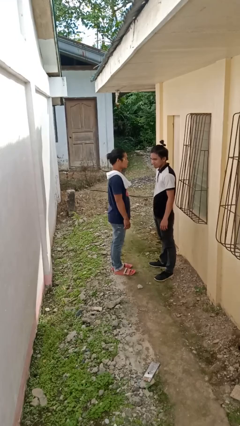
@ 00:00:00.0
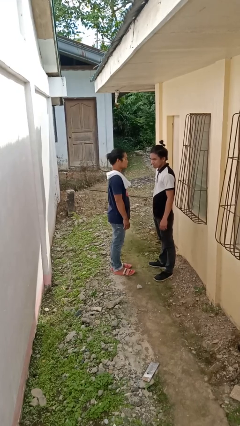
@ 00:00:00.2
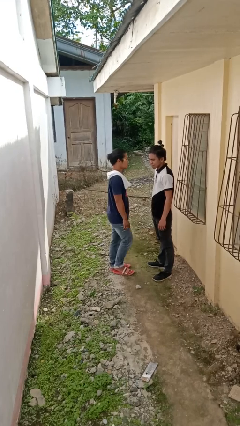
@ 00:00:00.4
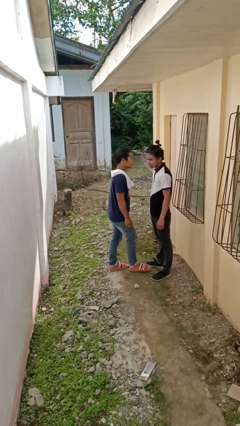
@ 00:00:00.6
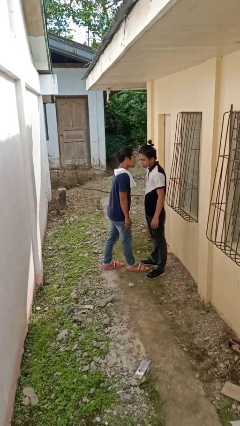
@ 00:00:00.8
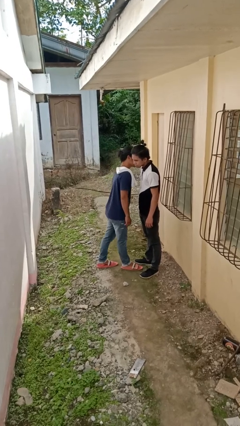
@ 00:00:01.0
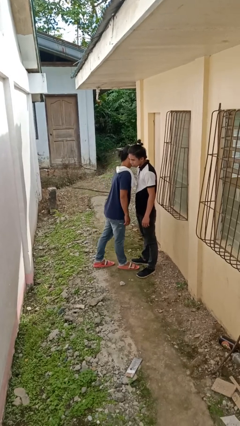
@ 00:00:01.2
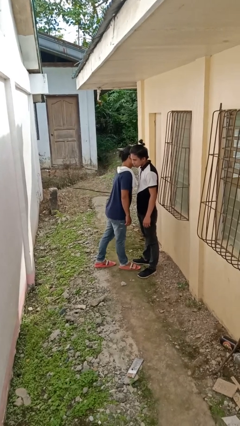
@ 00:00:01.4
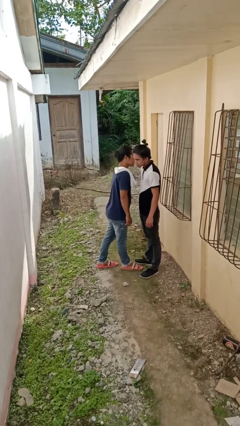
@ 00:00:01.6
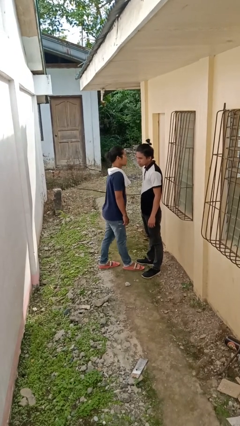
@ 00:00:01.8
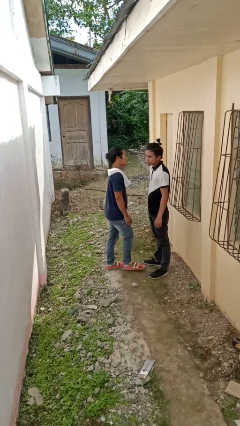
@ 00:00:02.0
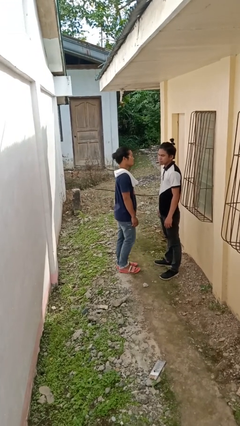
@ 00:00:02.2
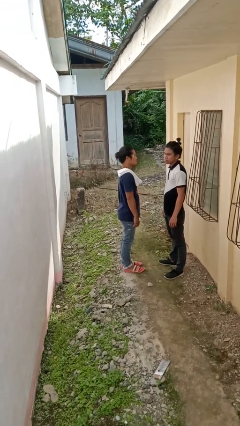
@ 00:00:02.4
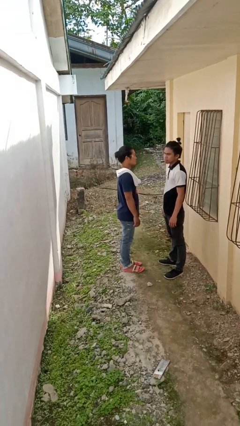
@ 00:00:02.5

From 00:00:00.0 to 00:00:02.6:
person kisses cheek of person

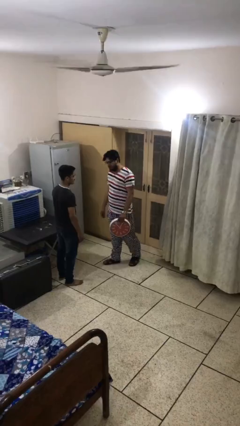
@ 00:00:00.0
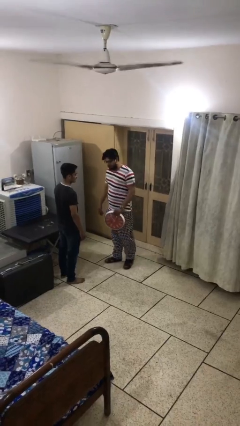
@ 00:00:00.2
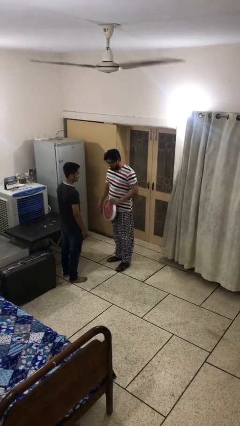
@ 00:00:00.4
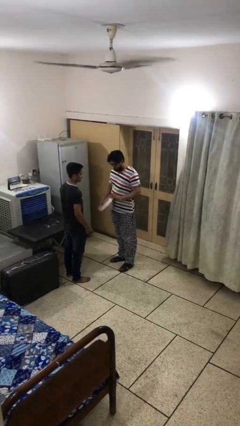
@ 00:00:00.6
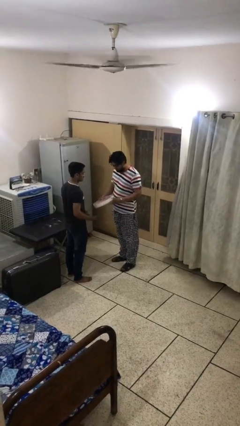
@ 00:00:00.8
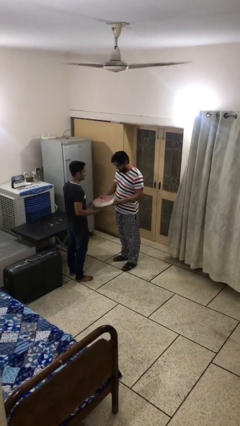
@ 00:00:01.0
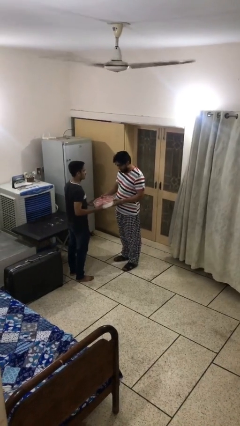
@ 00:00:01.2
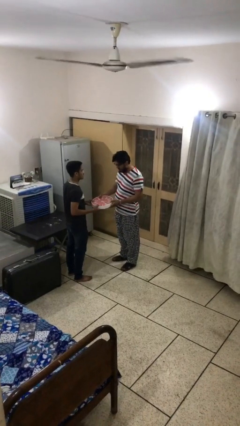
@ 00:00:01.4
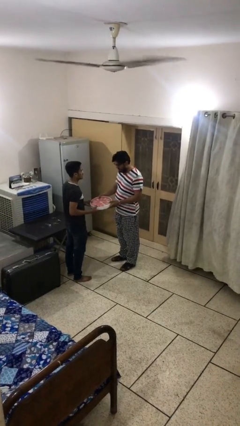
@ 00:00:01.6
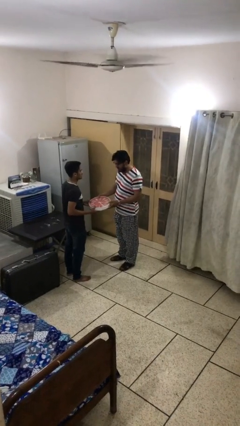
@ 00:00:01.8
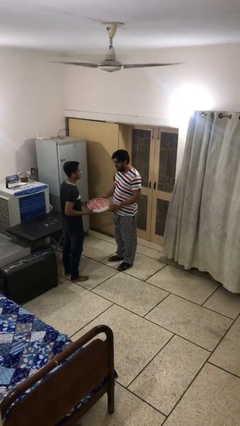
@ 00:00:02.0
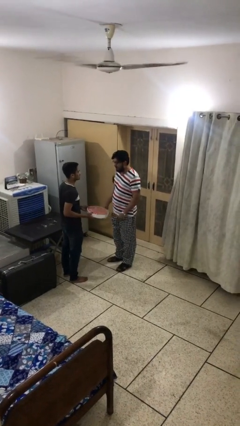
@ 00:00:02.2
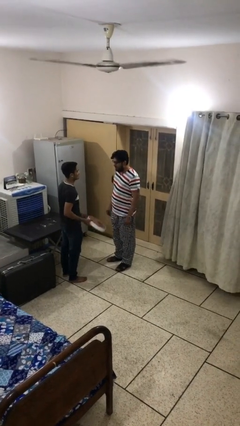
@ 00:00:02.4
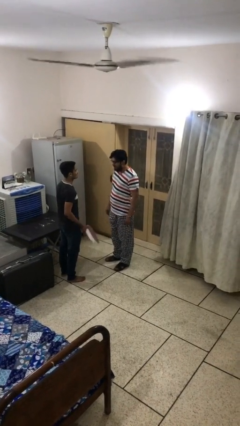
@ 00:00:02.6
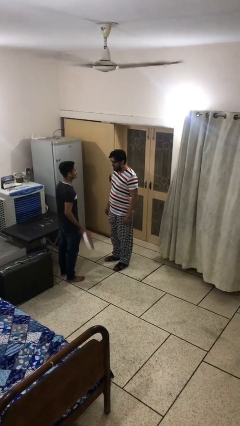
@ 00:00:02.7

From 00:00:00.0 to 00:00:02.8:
person transfers object to person

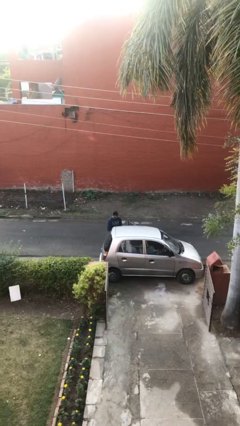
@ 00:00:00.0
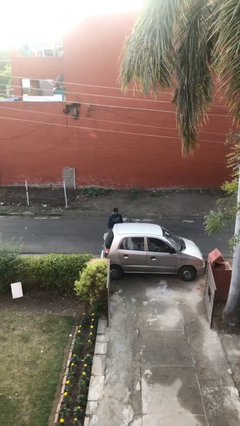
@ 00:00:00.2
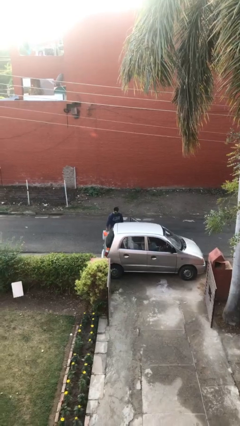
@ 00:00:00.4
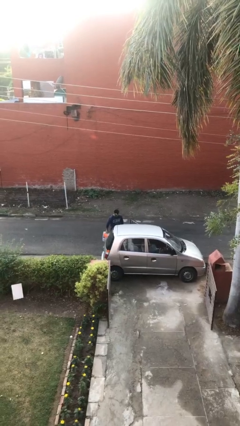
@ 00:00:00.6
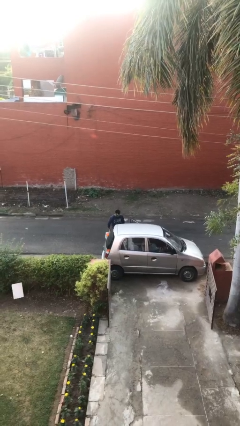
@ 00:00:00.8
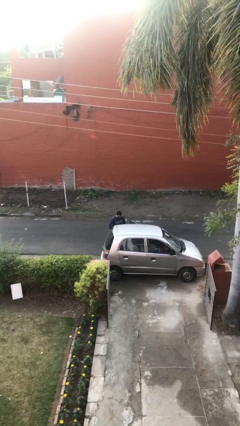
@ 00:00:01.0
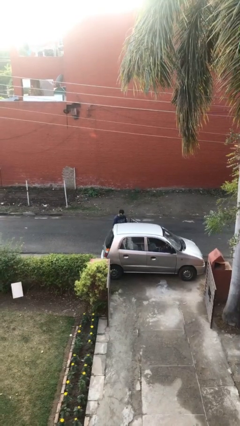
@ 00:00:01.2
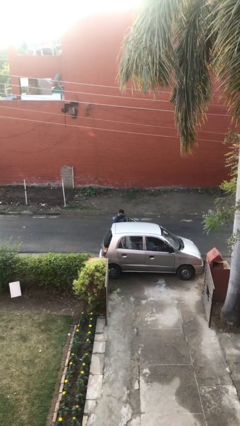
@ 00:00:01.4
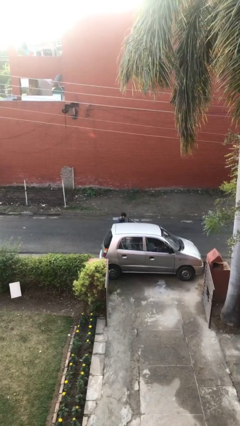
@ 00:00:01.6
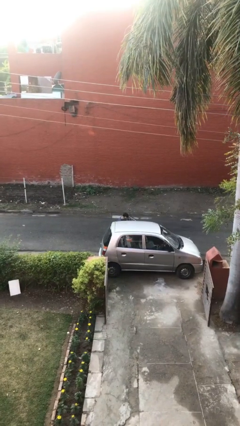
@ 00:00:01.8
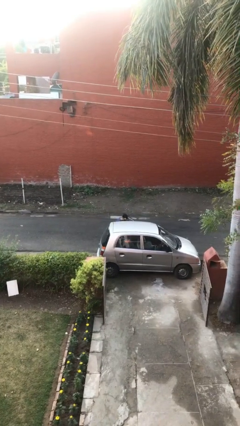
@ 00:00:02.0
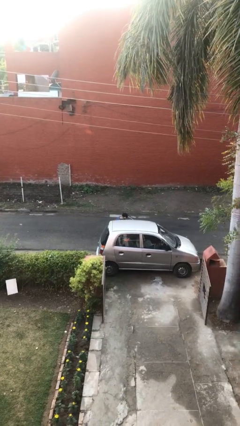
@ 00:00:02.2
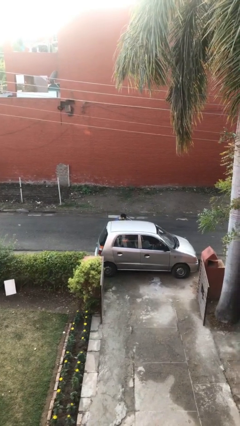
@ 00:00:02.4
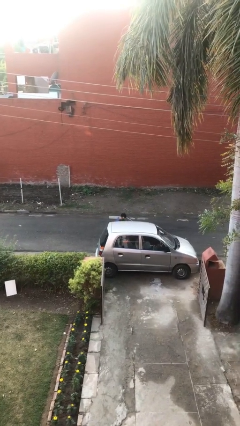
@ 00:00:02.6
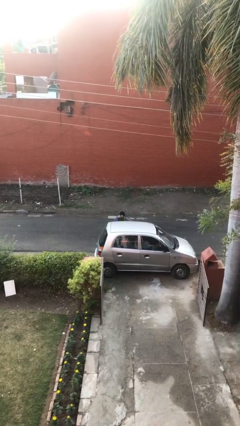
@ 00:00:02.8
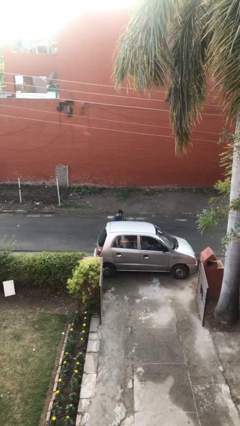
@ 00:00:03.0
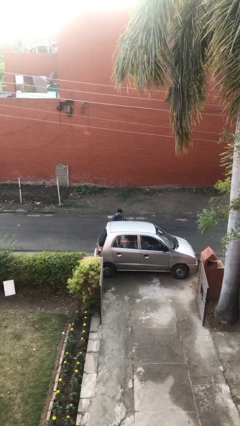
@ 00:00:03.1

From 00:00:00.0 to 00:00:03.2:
person loads car

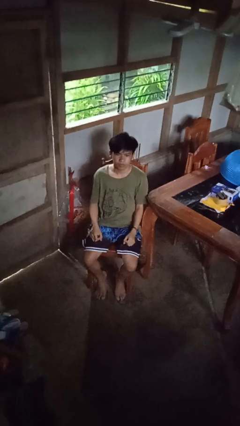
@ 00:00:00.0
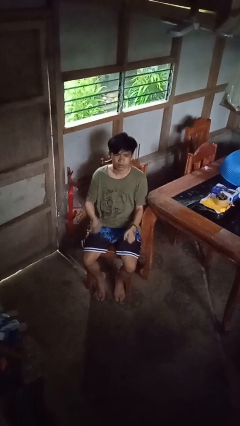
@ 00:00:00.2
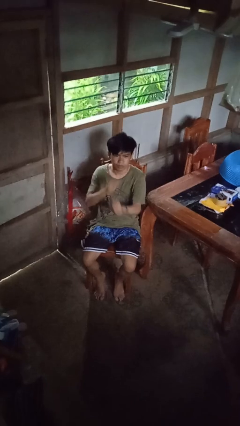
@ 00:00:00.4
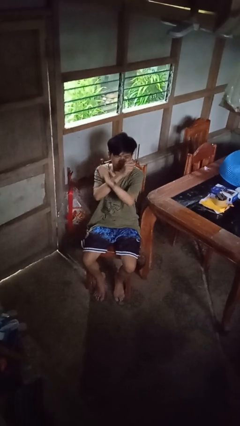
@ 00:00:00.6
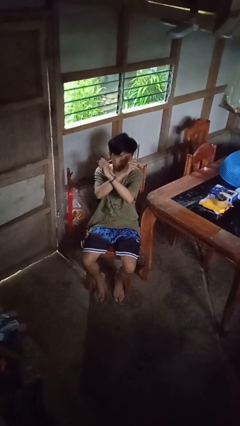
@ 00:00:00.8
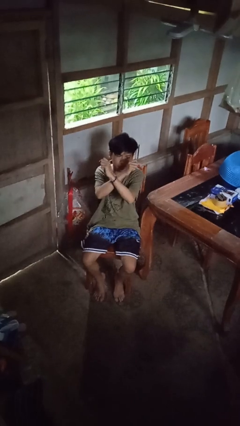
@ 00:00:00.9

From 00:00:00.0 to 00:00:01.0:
person gestures arms x

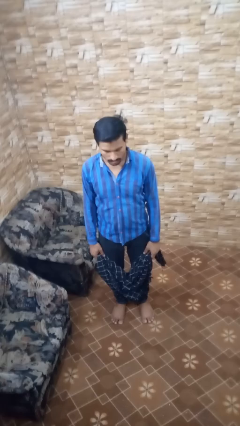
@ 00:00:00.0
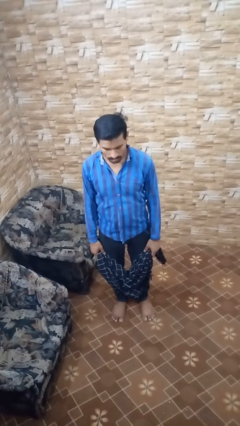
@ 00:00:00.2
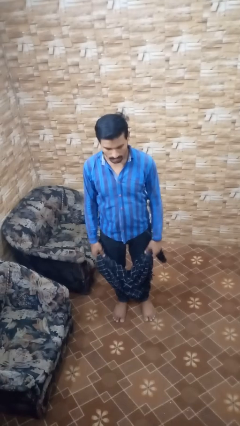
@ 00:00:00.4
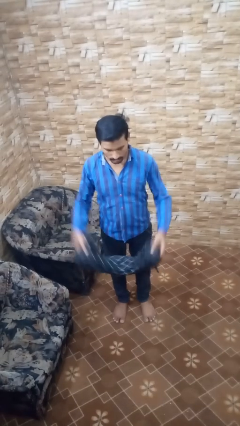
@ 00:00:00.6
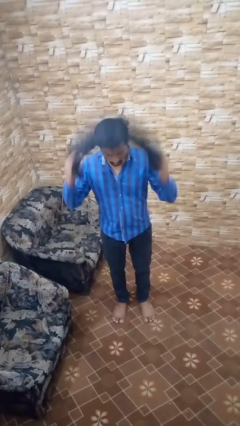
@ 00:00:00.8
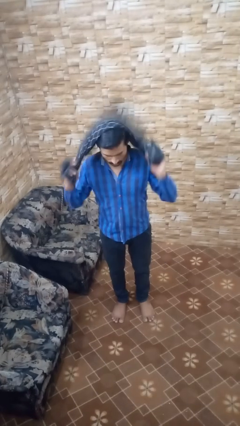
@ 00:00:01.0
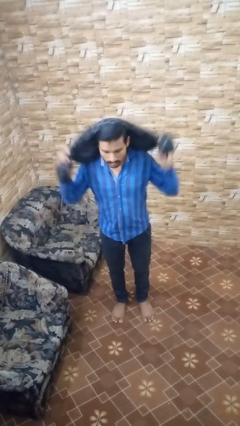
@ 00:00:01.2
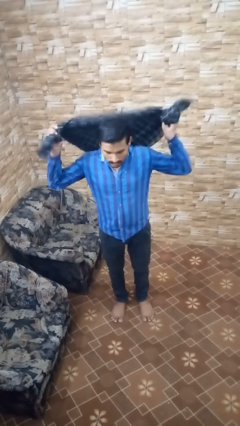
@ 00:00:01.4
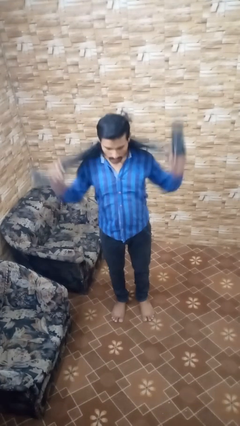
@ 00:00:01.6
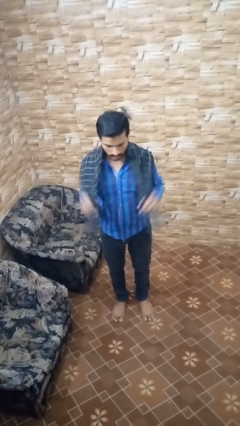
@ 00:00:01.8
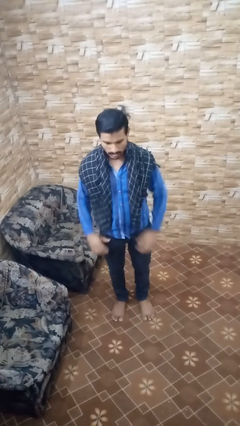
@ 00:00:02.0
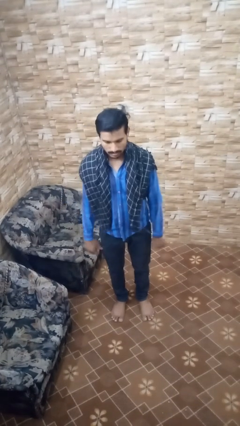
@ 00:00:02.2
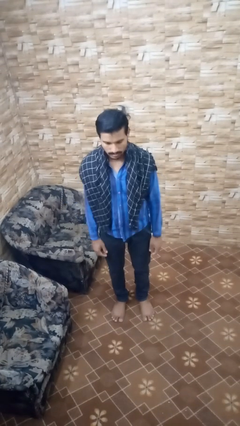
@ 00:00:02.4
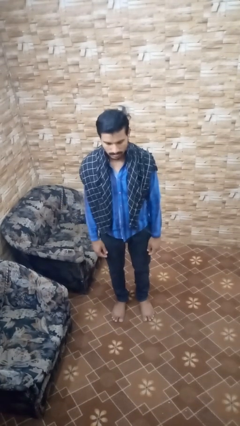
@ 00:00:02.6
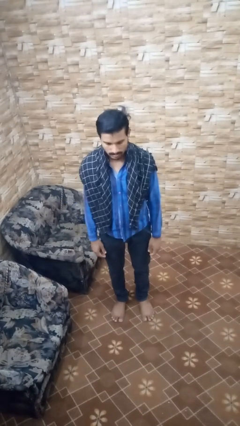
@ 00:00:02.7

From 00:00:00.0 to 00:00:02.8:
person puts on scarf

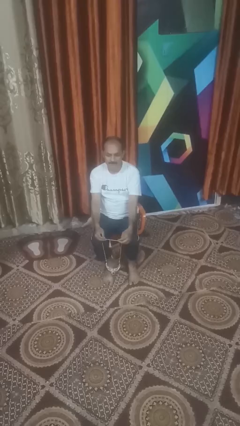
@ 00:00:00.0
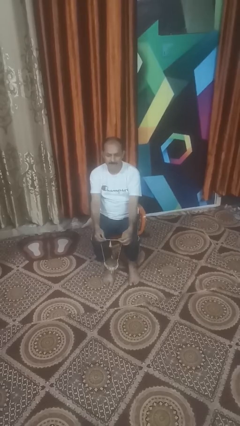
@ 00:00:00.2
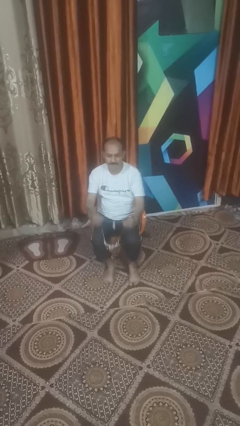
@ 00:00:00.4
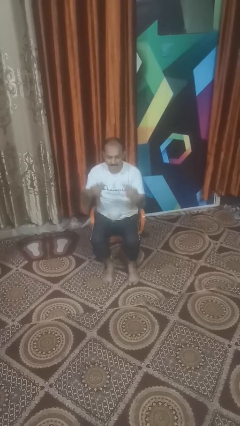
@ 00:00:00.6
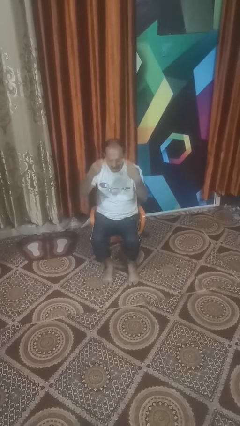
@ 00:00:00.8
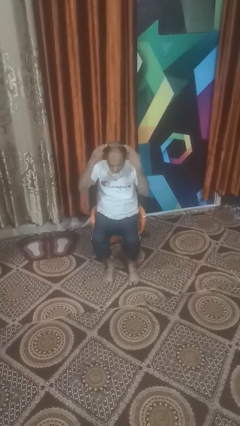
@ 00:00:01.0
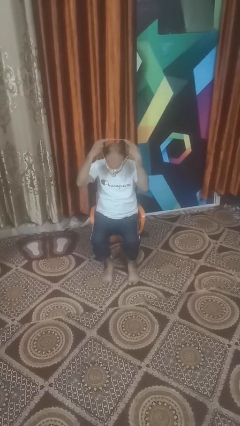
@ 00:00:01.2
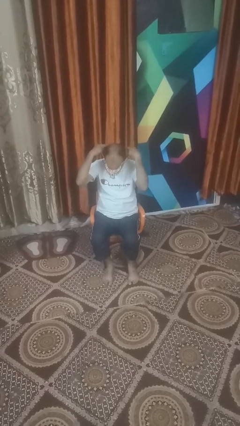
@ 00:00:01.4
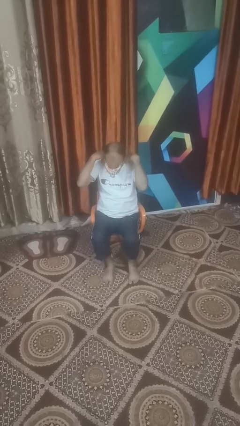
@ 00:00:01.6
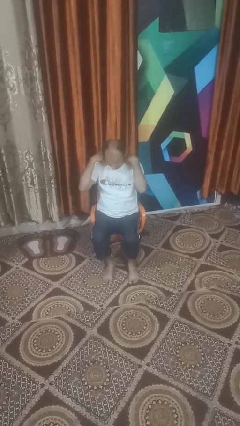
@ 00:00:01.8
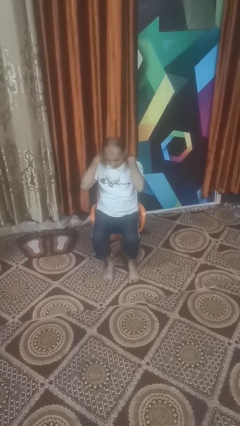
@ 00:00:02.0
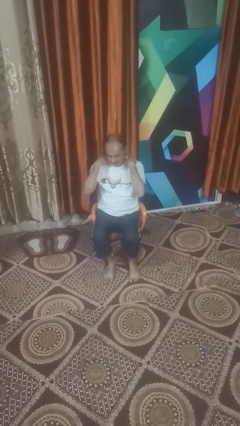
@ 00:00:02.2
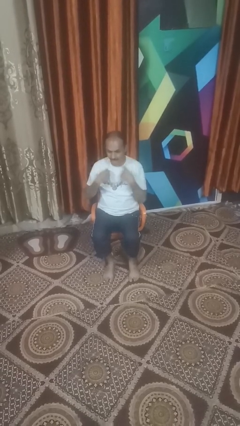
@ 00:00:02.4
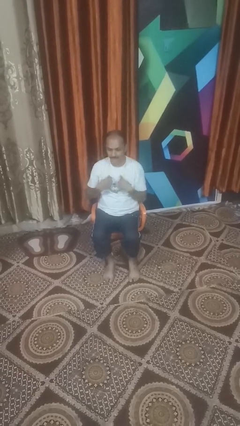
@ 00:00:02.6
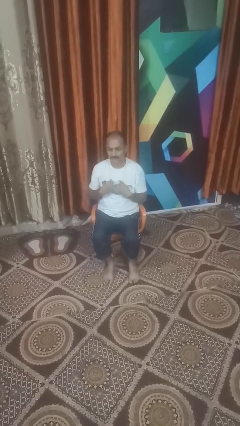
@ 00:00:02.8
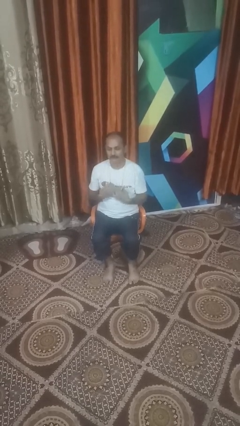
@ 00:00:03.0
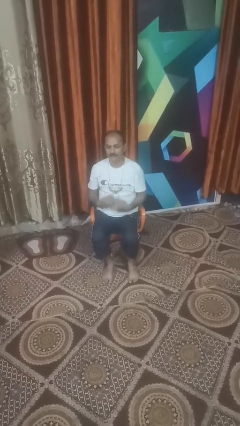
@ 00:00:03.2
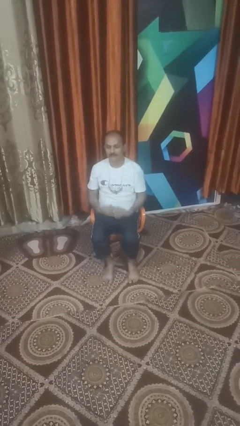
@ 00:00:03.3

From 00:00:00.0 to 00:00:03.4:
person puts on necklace

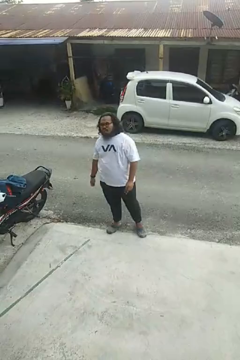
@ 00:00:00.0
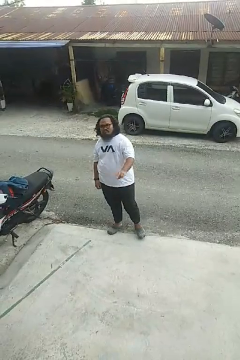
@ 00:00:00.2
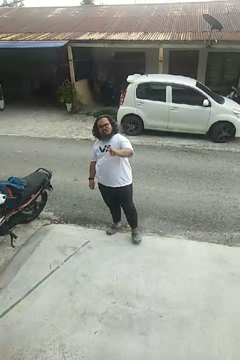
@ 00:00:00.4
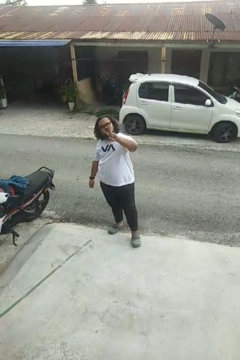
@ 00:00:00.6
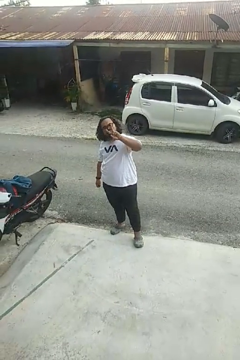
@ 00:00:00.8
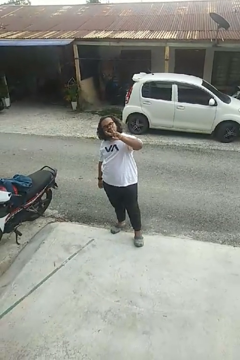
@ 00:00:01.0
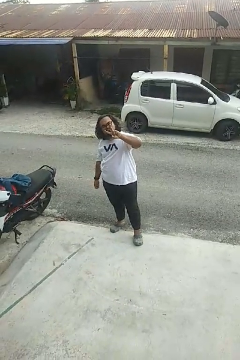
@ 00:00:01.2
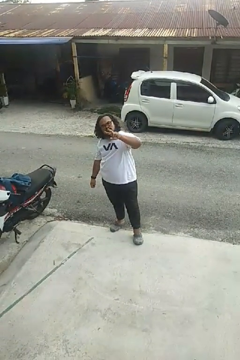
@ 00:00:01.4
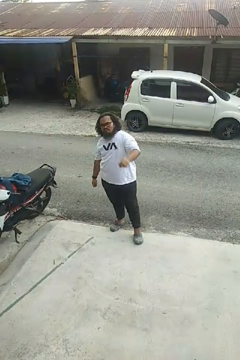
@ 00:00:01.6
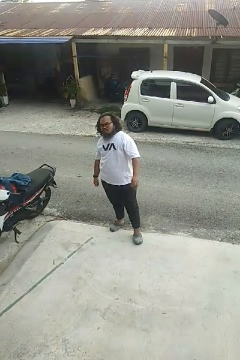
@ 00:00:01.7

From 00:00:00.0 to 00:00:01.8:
person gestures peace
